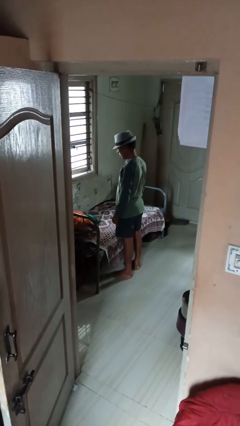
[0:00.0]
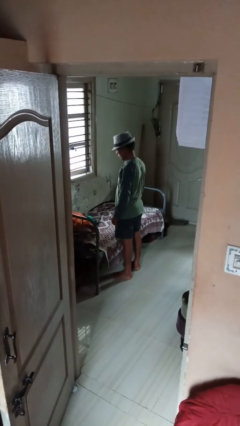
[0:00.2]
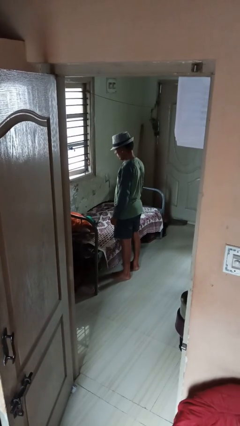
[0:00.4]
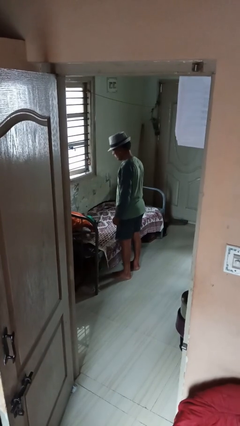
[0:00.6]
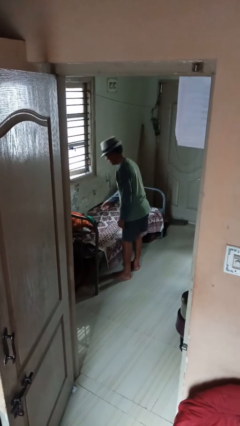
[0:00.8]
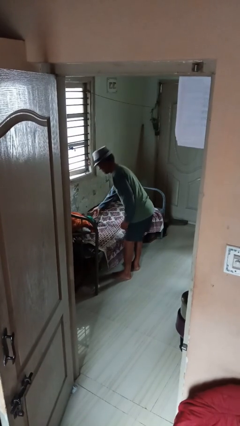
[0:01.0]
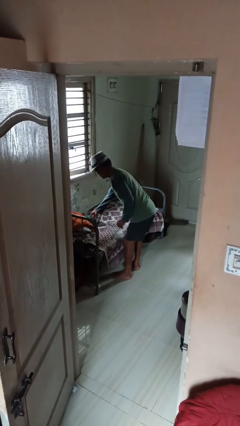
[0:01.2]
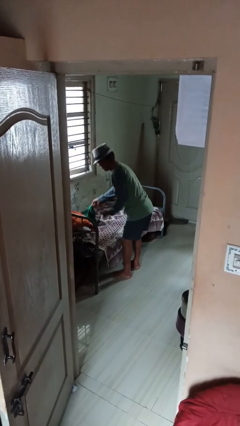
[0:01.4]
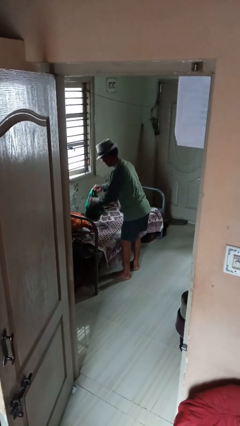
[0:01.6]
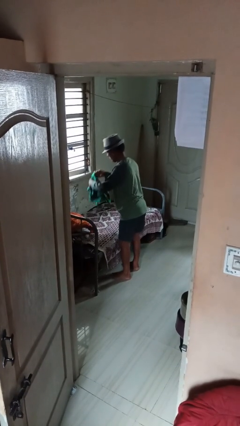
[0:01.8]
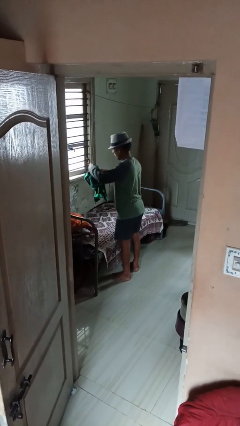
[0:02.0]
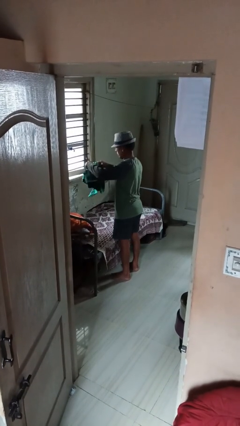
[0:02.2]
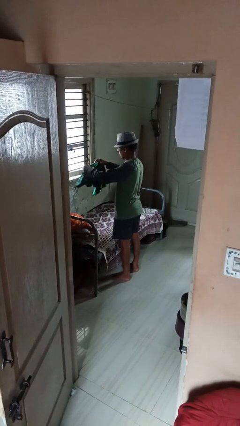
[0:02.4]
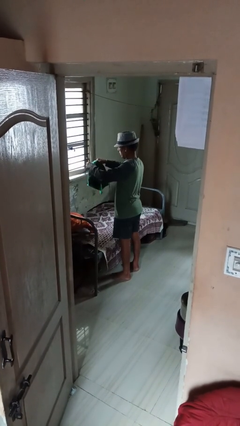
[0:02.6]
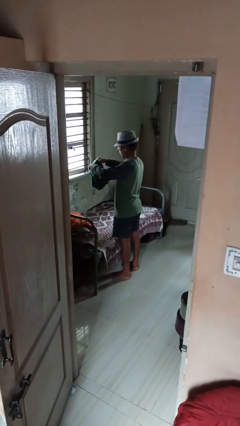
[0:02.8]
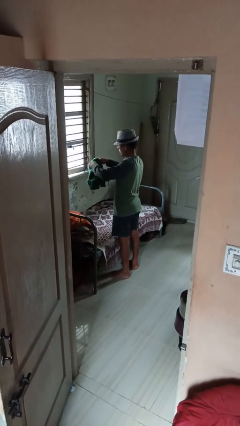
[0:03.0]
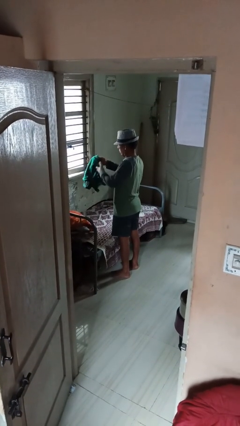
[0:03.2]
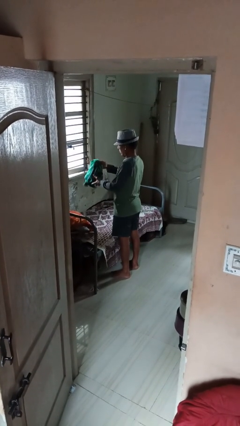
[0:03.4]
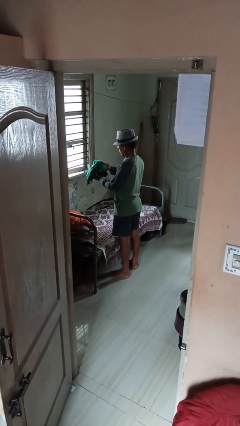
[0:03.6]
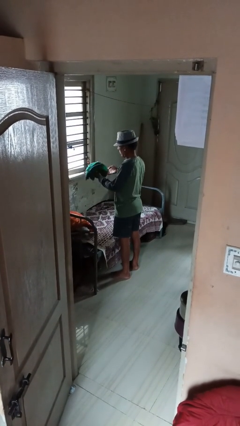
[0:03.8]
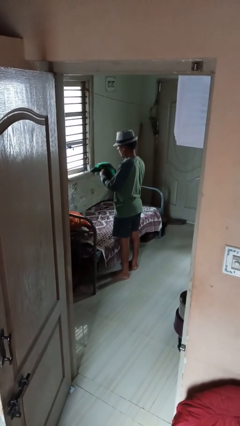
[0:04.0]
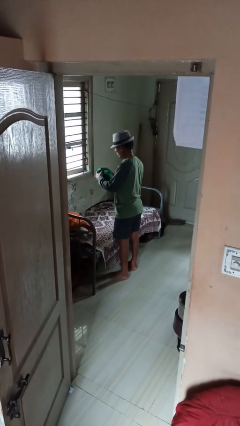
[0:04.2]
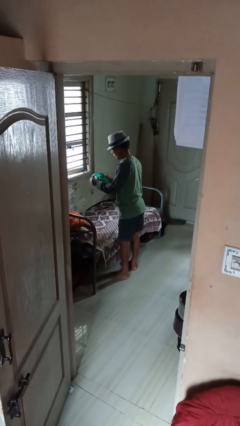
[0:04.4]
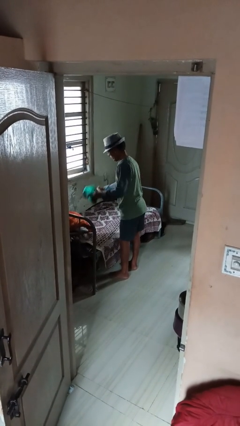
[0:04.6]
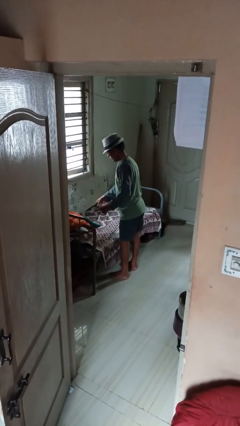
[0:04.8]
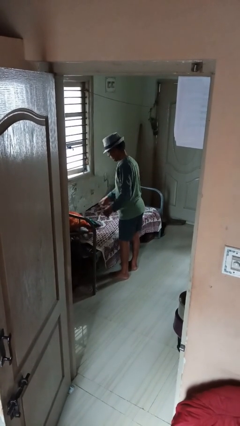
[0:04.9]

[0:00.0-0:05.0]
person folds shirt

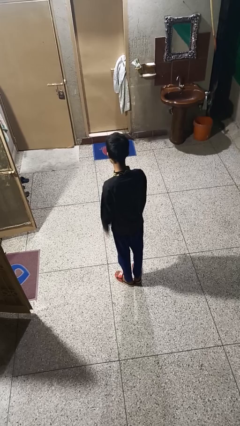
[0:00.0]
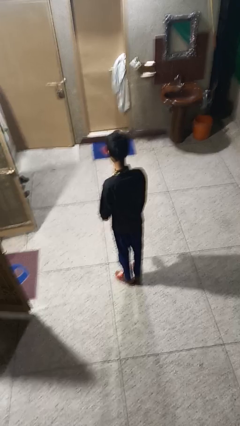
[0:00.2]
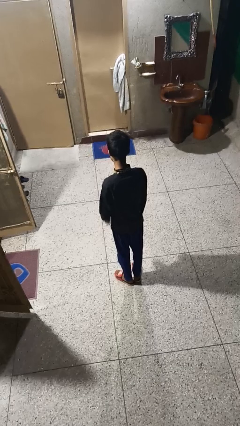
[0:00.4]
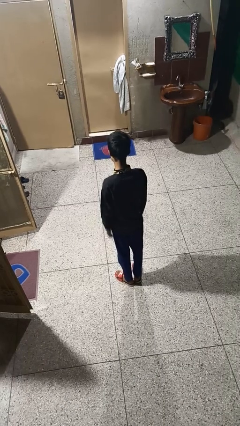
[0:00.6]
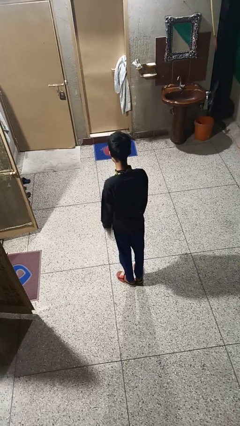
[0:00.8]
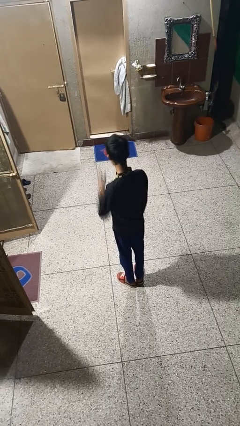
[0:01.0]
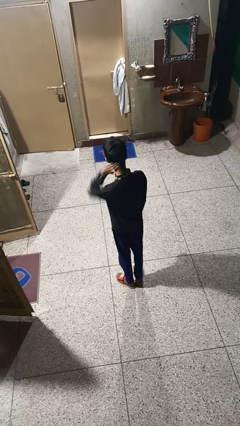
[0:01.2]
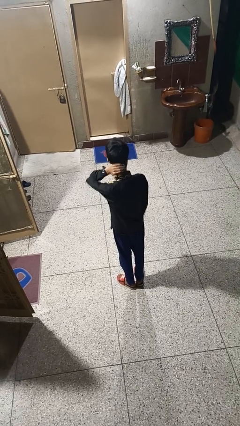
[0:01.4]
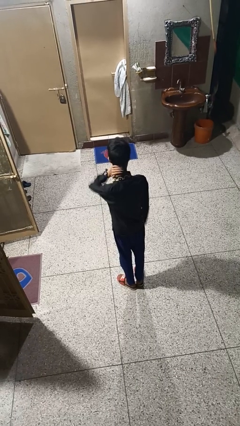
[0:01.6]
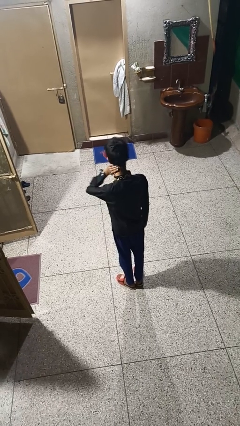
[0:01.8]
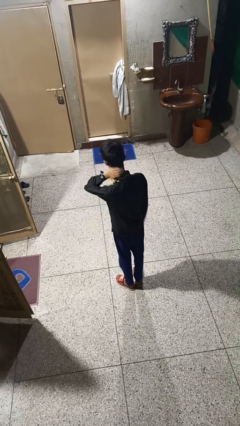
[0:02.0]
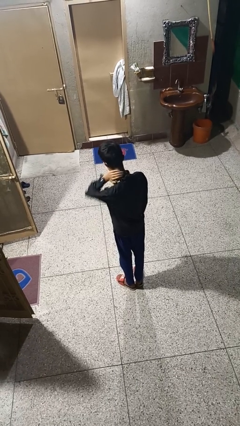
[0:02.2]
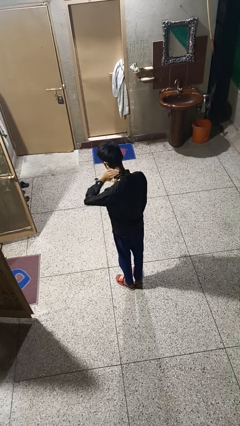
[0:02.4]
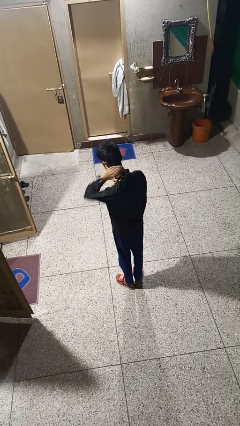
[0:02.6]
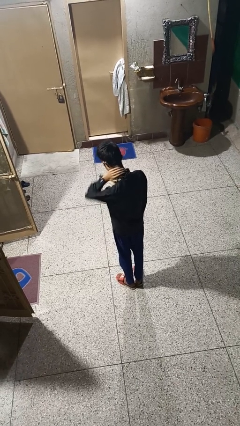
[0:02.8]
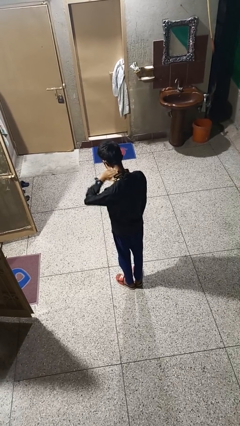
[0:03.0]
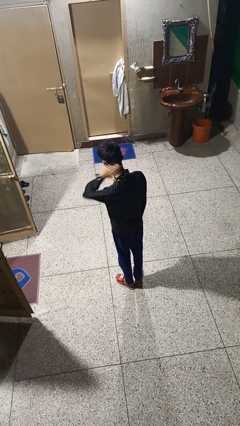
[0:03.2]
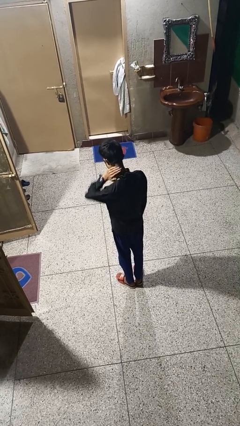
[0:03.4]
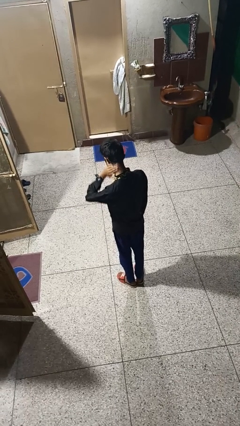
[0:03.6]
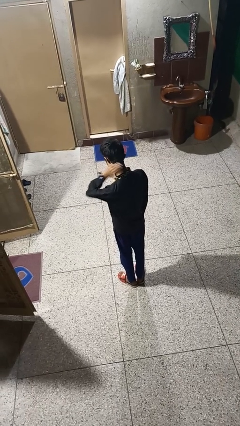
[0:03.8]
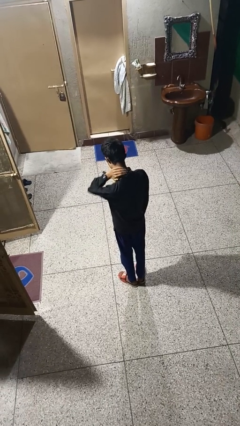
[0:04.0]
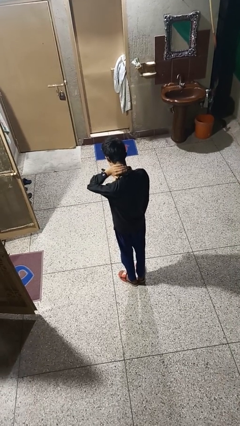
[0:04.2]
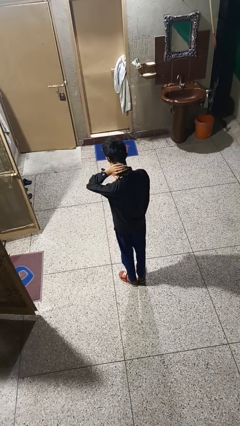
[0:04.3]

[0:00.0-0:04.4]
person rubs neck

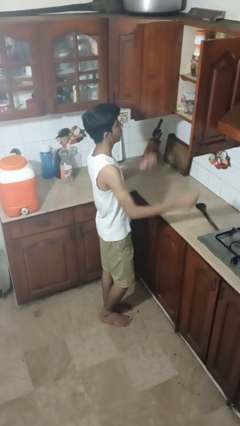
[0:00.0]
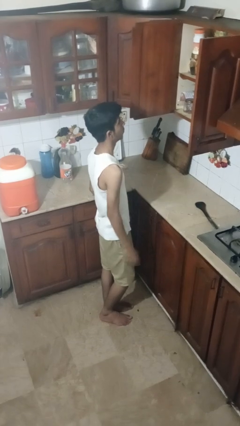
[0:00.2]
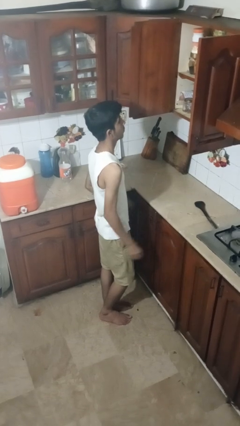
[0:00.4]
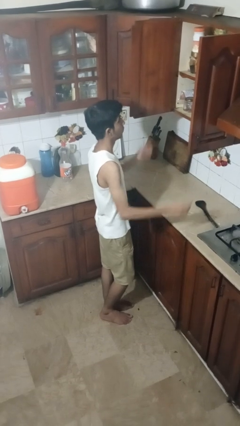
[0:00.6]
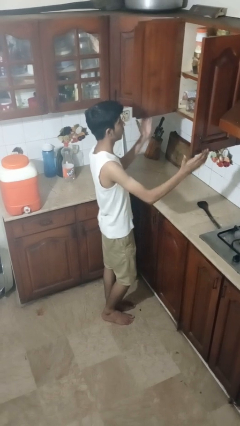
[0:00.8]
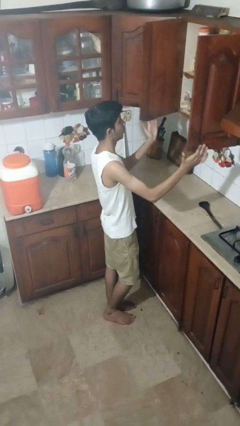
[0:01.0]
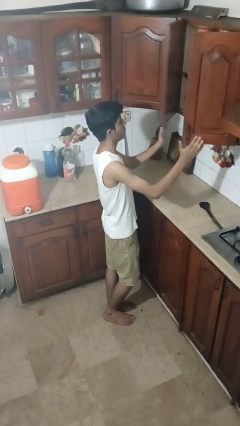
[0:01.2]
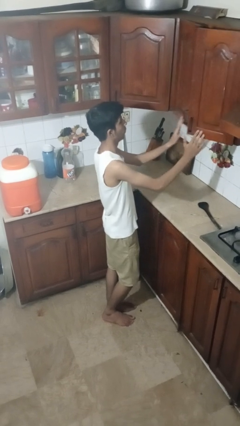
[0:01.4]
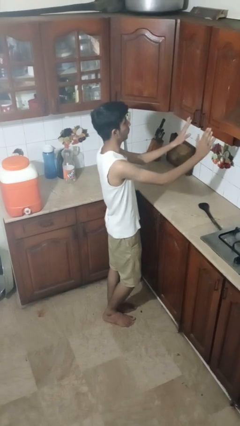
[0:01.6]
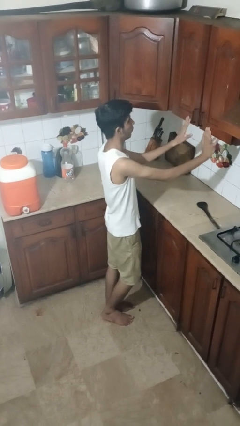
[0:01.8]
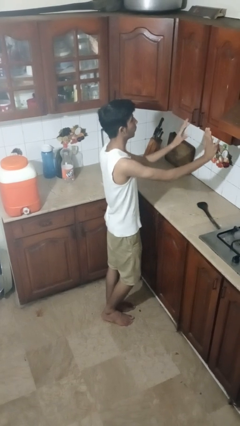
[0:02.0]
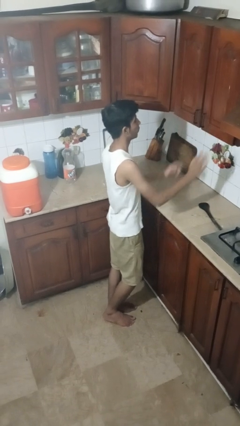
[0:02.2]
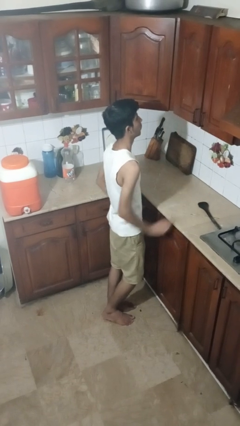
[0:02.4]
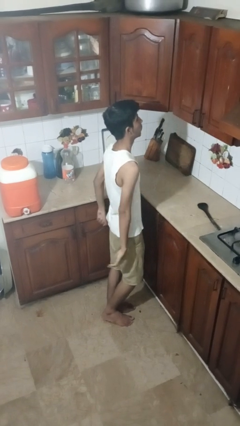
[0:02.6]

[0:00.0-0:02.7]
person closes cabinet

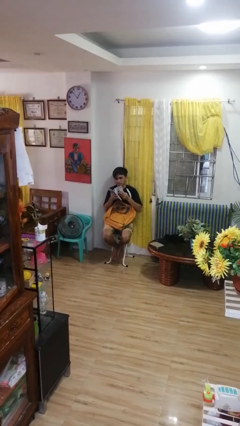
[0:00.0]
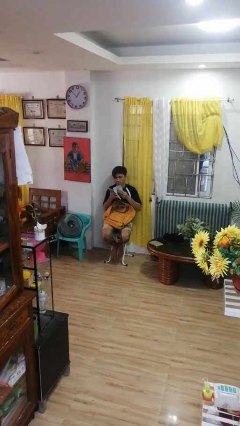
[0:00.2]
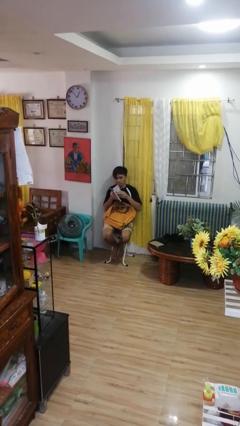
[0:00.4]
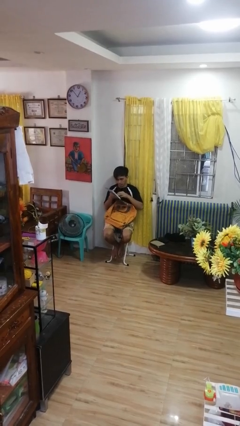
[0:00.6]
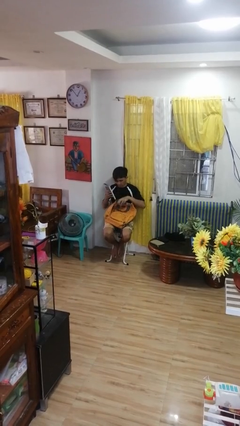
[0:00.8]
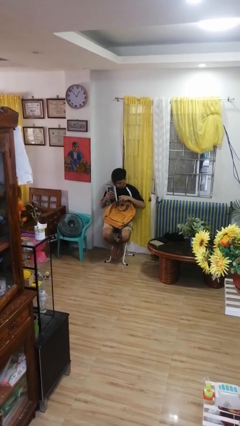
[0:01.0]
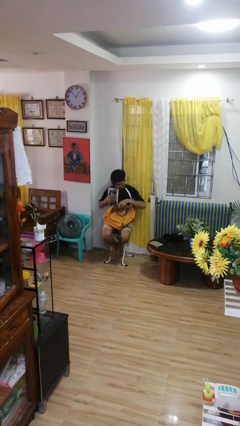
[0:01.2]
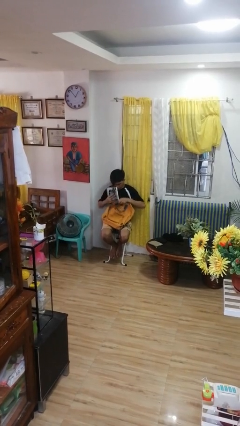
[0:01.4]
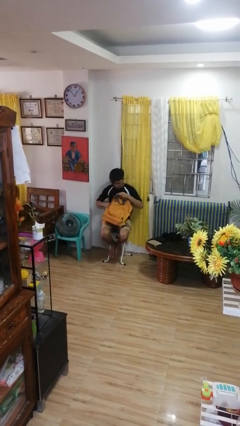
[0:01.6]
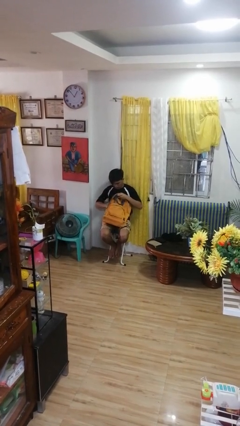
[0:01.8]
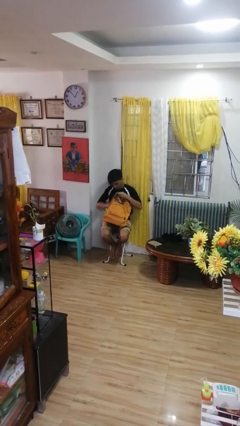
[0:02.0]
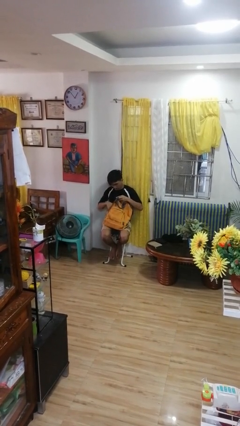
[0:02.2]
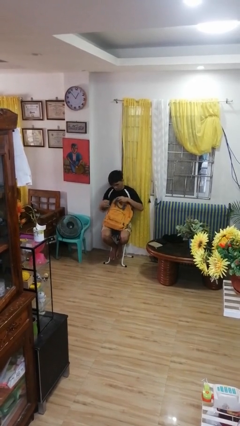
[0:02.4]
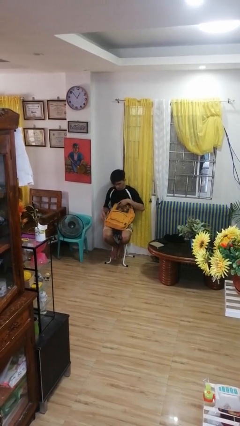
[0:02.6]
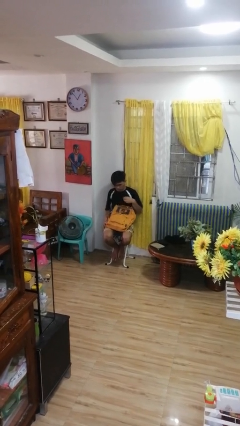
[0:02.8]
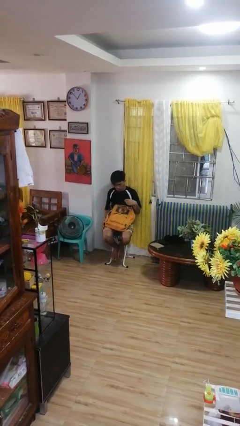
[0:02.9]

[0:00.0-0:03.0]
person puts object into backpack

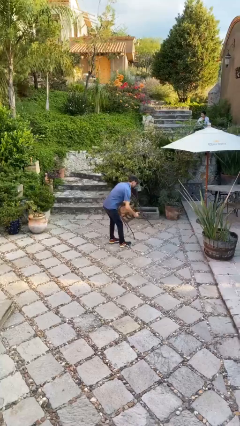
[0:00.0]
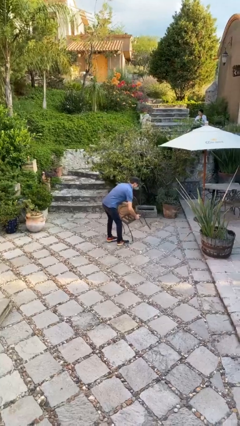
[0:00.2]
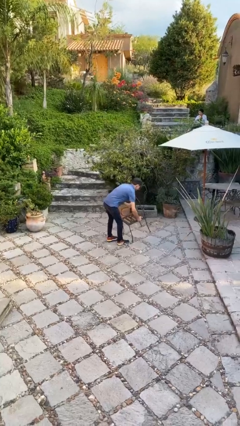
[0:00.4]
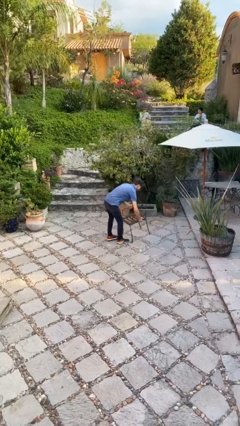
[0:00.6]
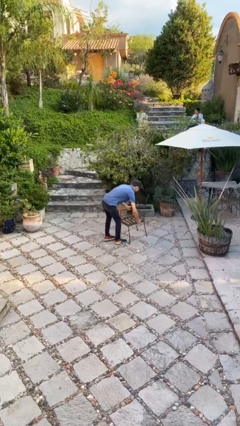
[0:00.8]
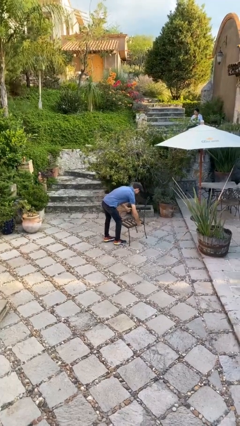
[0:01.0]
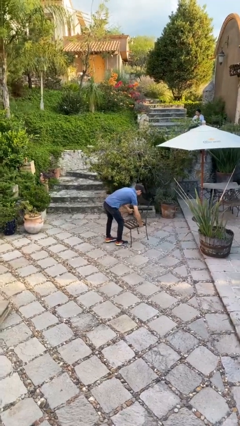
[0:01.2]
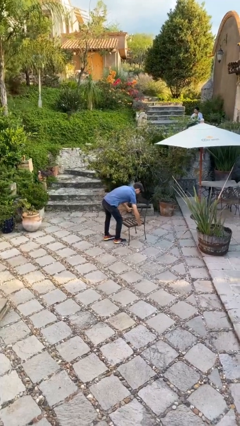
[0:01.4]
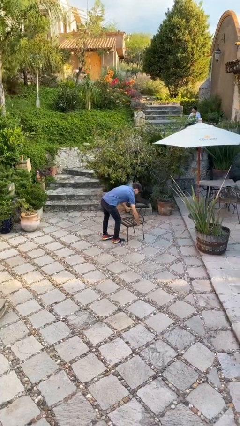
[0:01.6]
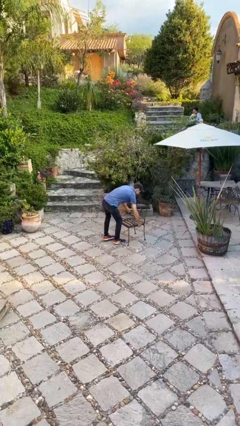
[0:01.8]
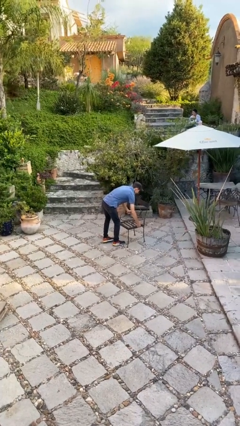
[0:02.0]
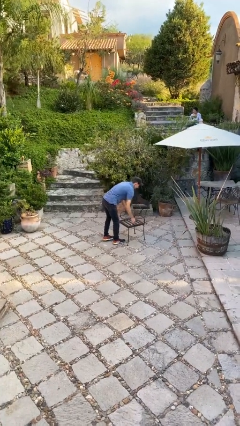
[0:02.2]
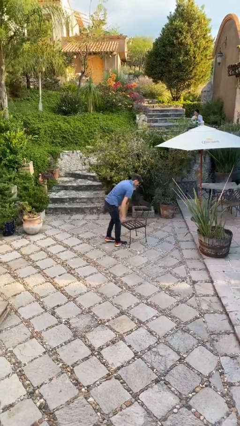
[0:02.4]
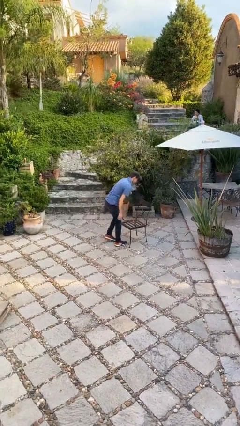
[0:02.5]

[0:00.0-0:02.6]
person puts down object on floor
